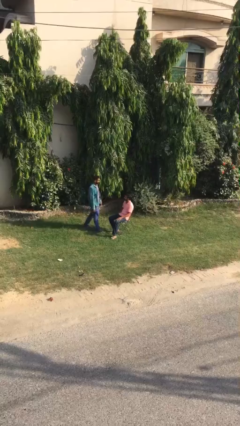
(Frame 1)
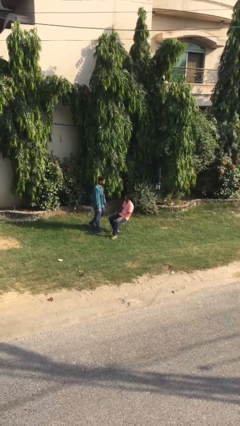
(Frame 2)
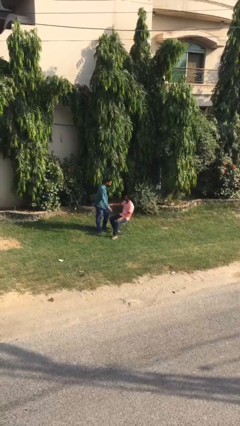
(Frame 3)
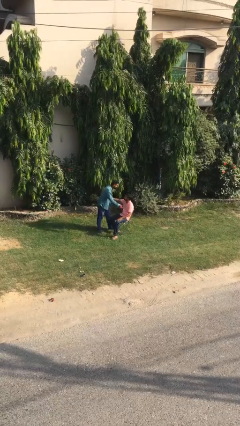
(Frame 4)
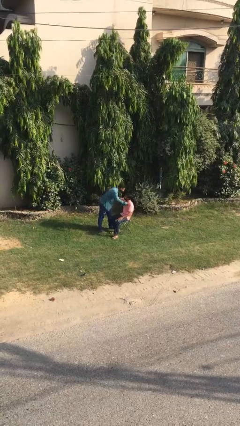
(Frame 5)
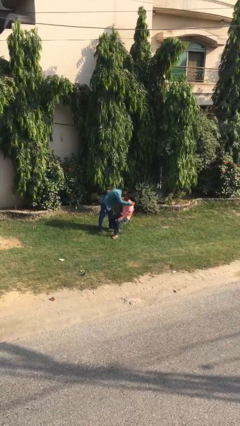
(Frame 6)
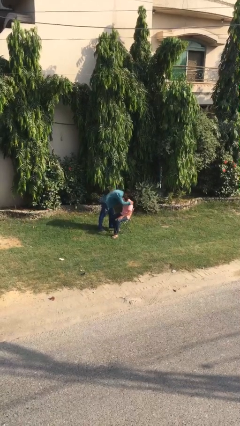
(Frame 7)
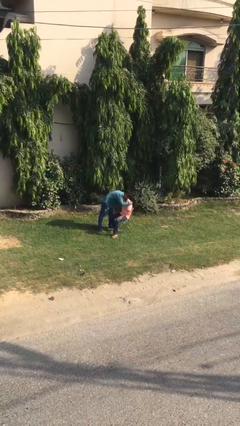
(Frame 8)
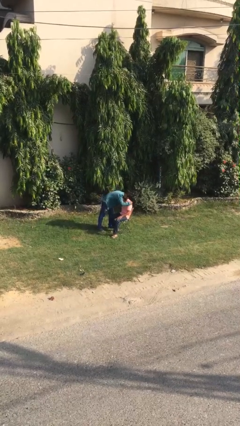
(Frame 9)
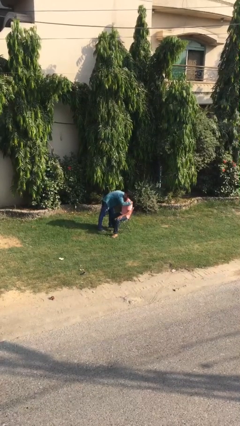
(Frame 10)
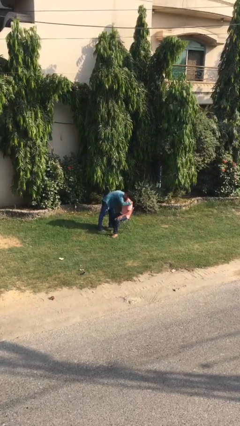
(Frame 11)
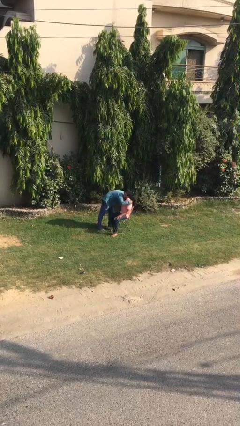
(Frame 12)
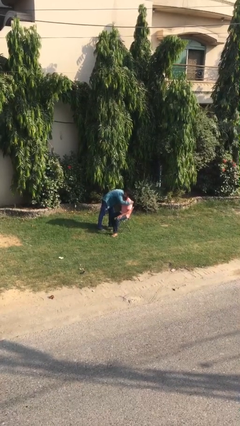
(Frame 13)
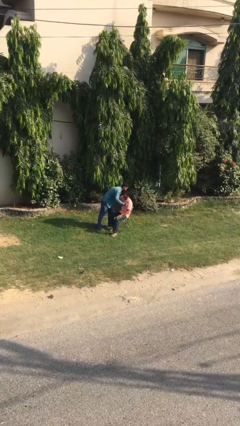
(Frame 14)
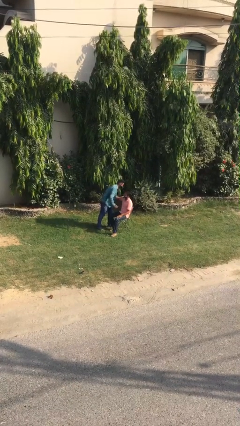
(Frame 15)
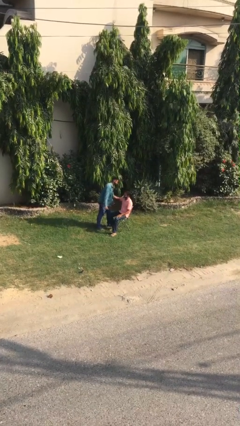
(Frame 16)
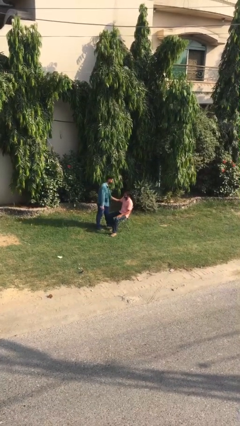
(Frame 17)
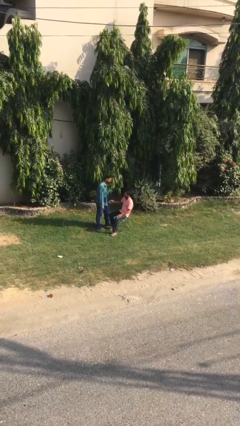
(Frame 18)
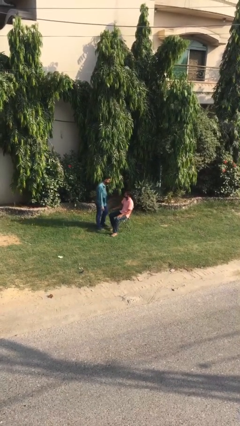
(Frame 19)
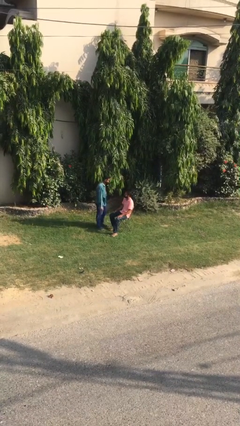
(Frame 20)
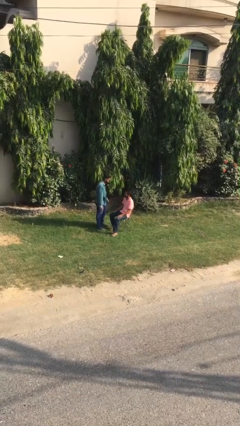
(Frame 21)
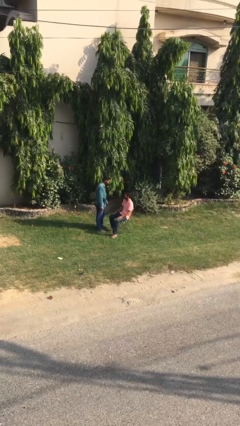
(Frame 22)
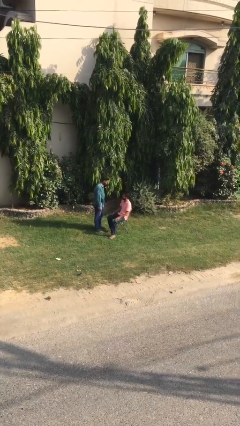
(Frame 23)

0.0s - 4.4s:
person embraces person

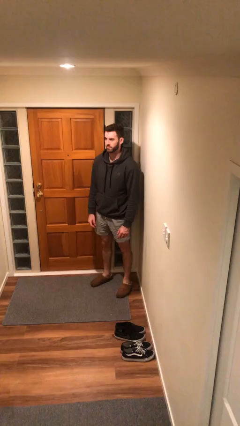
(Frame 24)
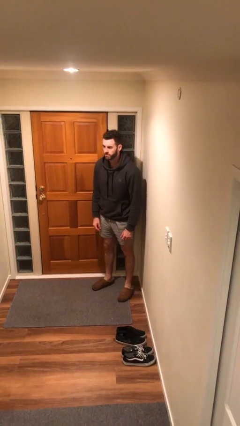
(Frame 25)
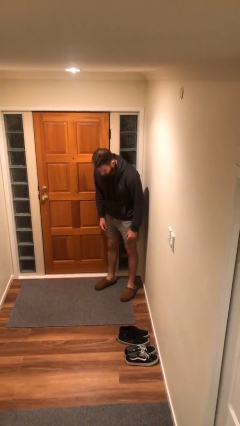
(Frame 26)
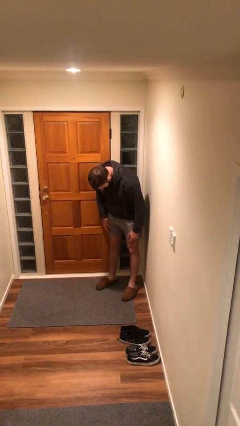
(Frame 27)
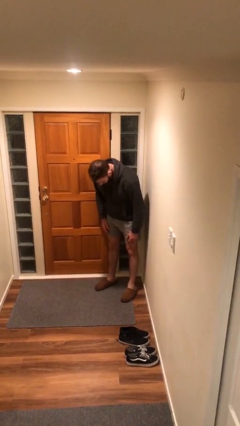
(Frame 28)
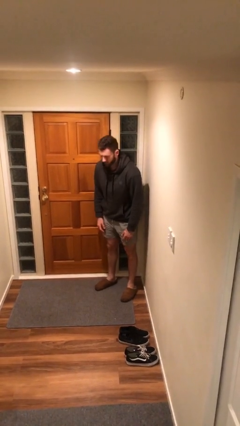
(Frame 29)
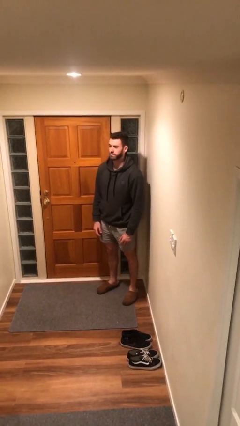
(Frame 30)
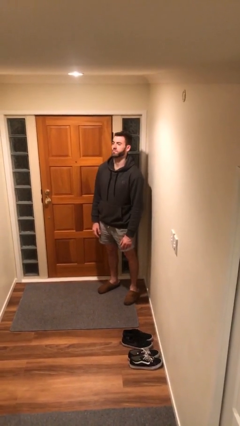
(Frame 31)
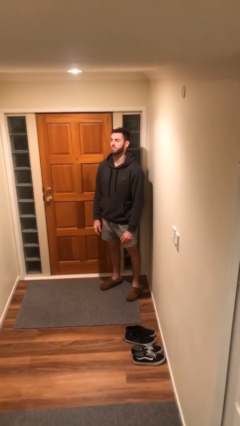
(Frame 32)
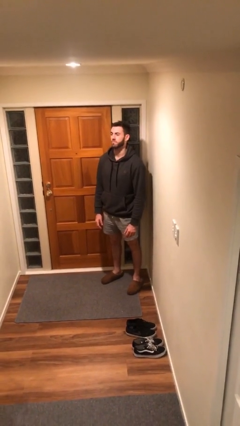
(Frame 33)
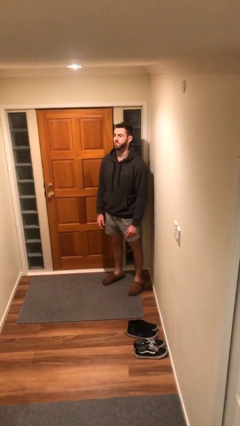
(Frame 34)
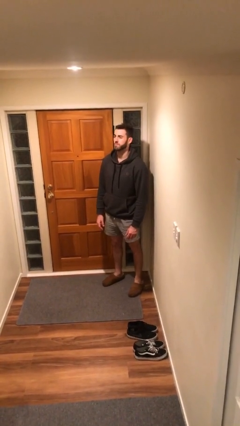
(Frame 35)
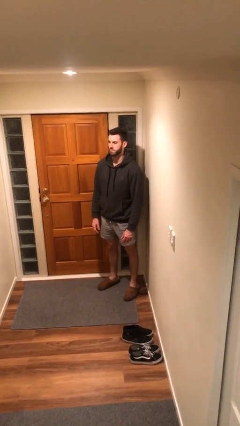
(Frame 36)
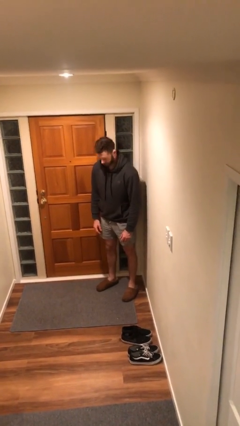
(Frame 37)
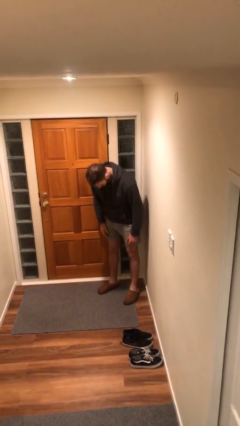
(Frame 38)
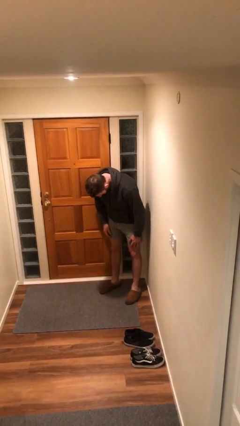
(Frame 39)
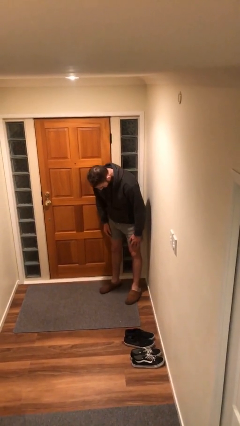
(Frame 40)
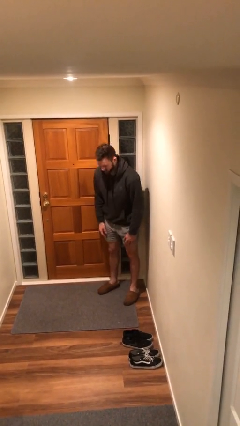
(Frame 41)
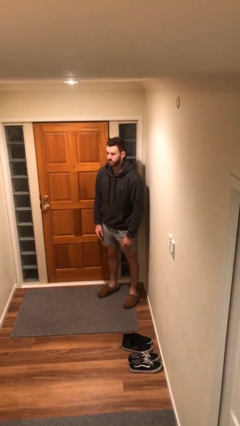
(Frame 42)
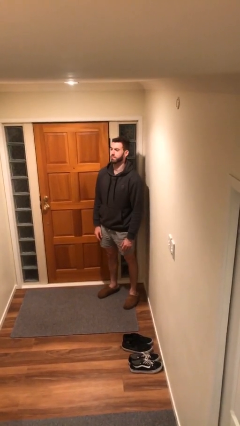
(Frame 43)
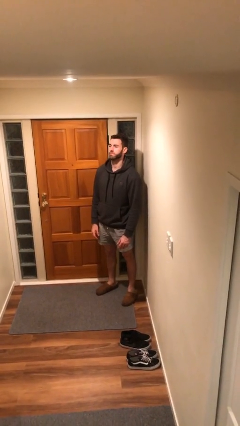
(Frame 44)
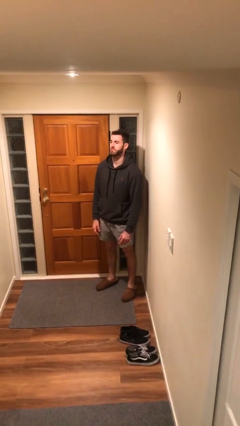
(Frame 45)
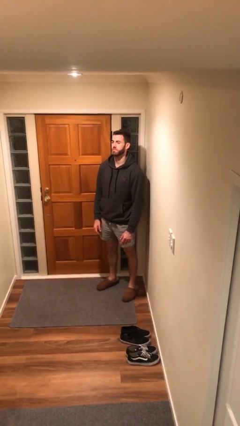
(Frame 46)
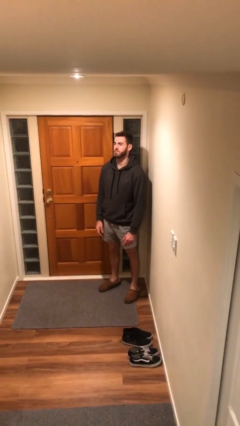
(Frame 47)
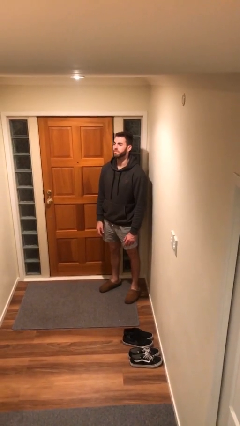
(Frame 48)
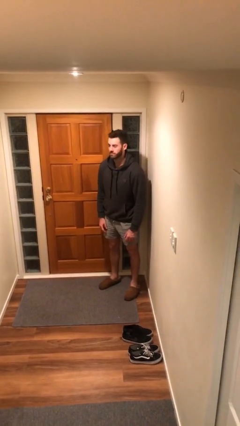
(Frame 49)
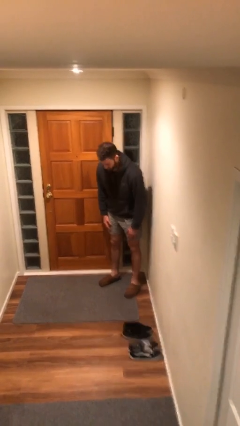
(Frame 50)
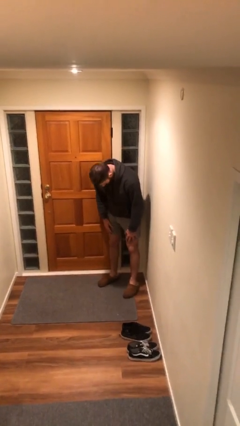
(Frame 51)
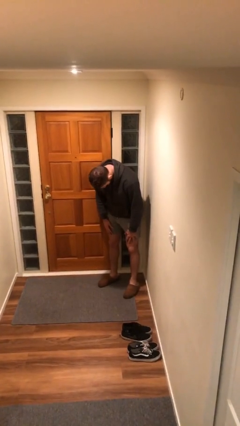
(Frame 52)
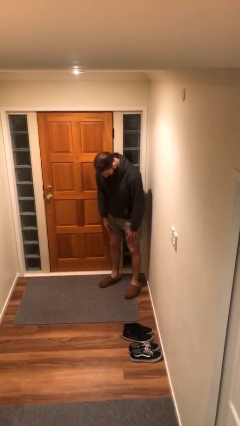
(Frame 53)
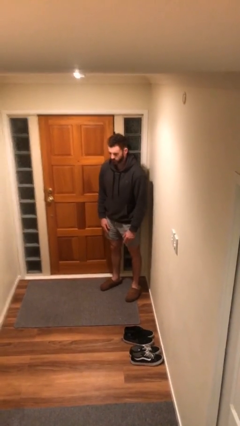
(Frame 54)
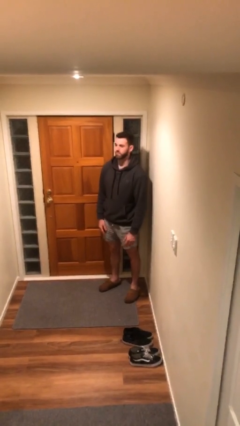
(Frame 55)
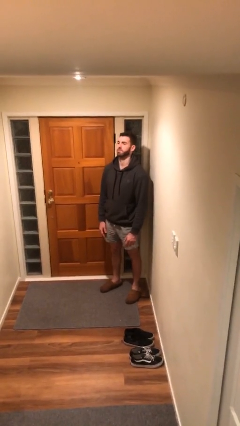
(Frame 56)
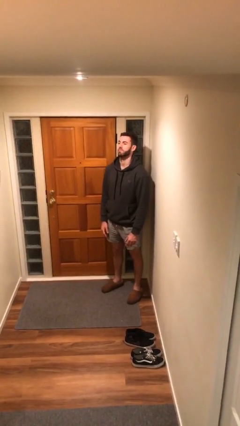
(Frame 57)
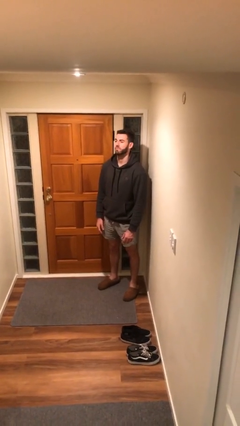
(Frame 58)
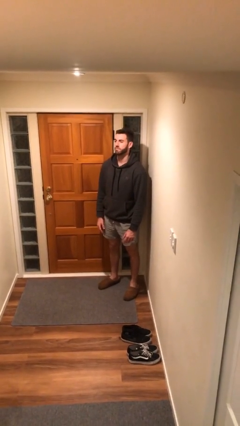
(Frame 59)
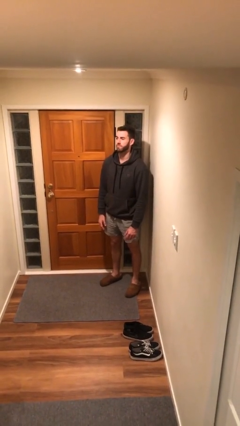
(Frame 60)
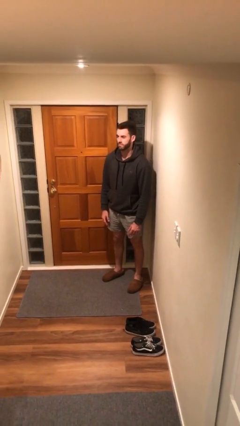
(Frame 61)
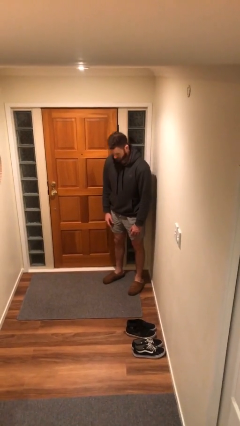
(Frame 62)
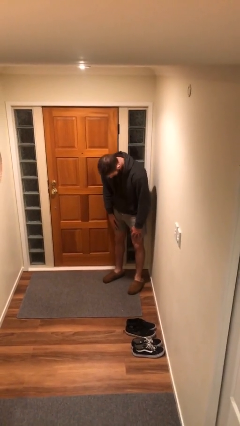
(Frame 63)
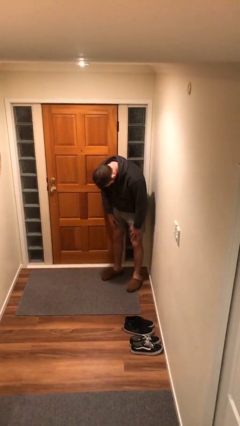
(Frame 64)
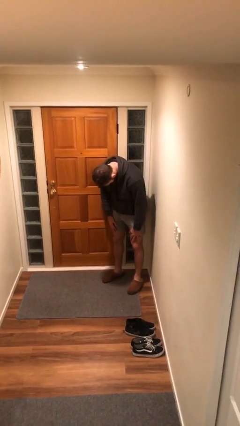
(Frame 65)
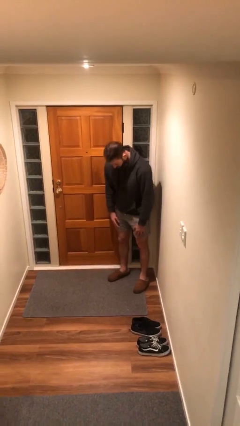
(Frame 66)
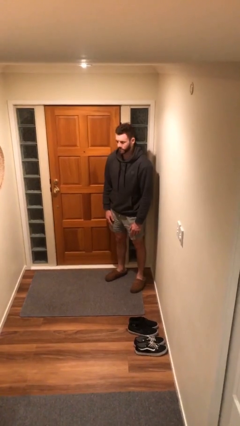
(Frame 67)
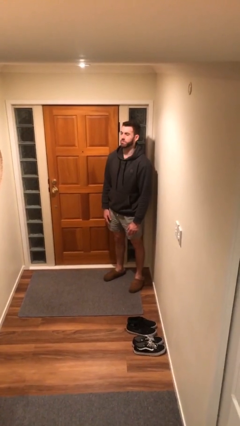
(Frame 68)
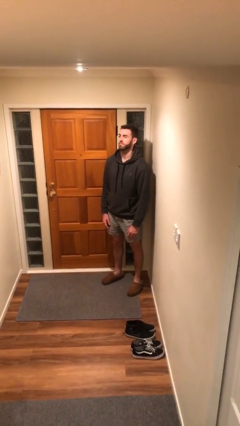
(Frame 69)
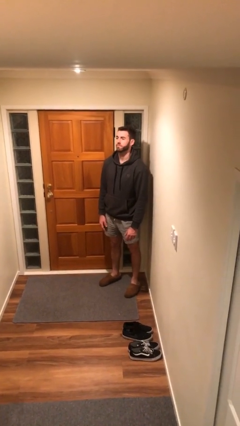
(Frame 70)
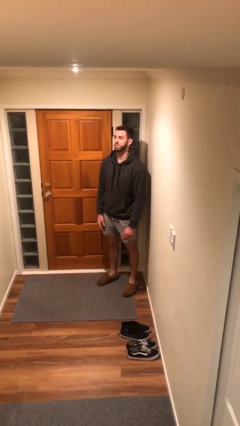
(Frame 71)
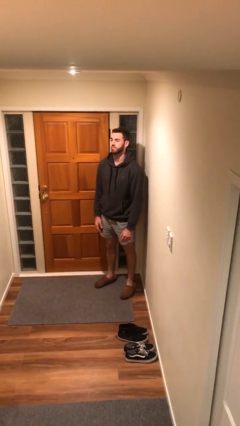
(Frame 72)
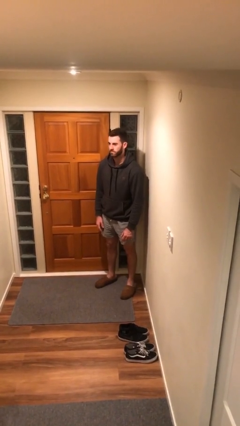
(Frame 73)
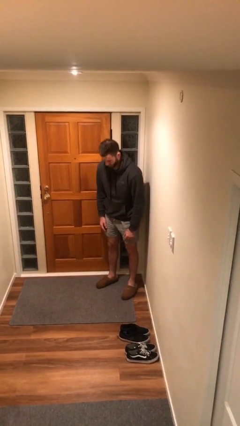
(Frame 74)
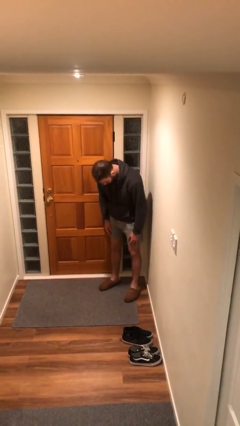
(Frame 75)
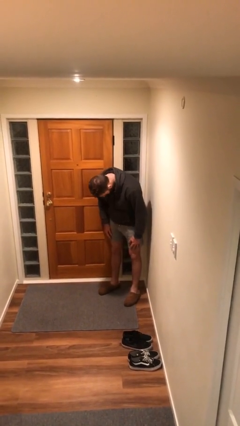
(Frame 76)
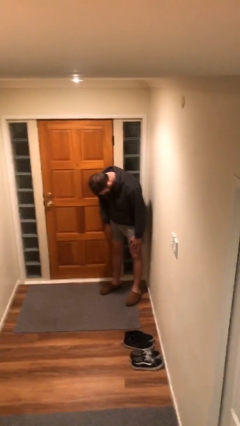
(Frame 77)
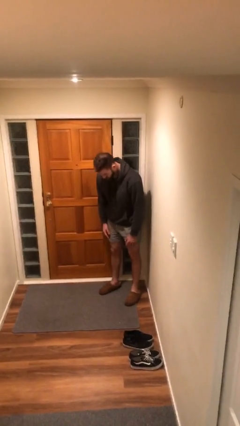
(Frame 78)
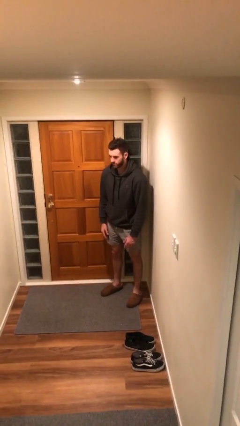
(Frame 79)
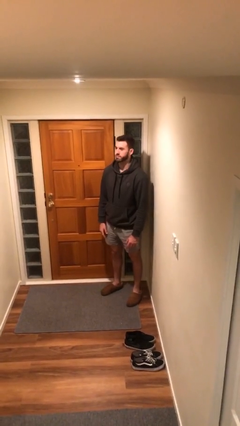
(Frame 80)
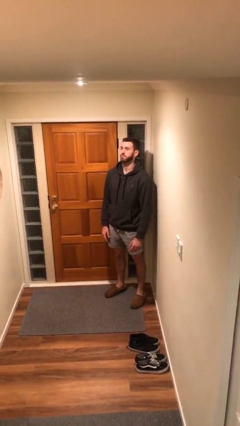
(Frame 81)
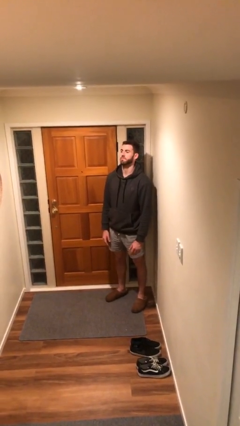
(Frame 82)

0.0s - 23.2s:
person bows

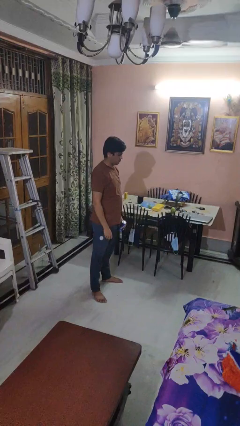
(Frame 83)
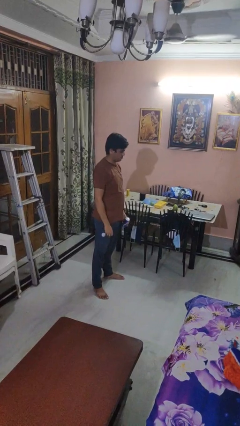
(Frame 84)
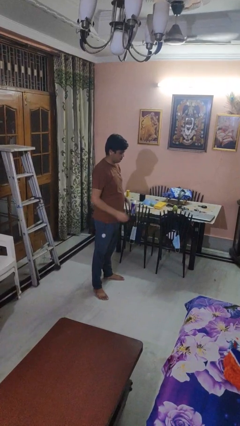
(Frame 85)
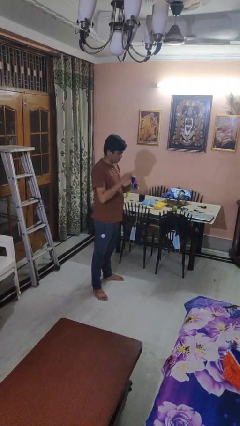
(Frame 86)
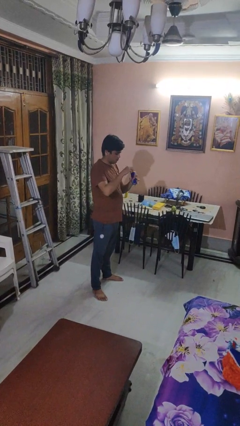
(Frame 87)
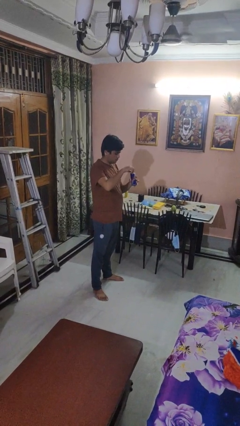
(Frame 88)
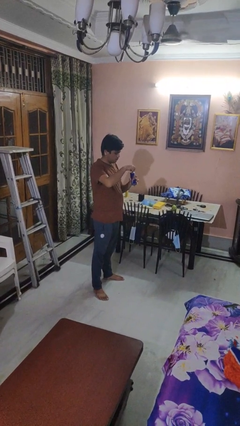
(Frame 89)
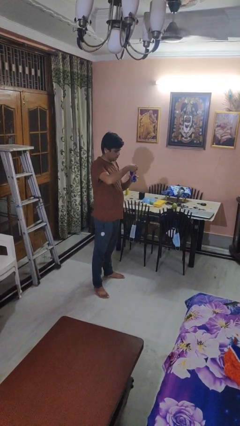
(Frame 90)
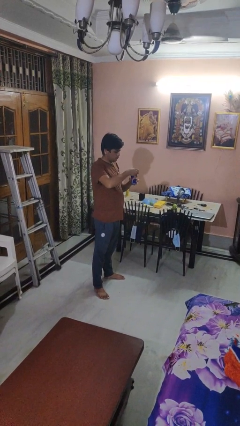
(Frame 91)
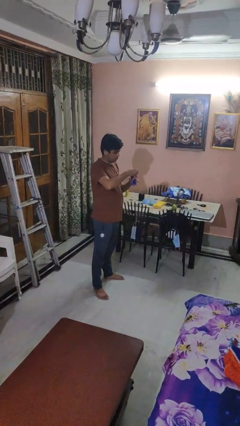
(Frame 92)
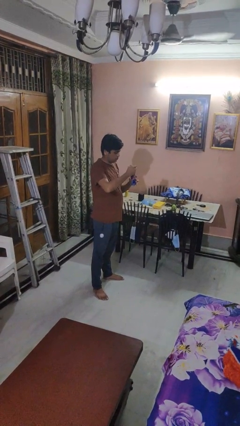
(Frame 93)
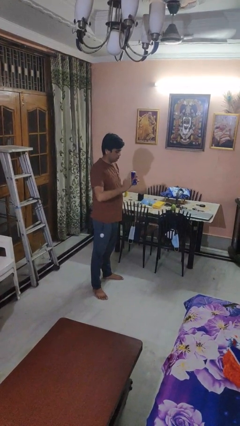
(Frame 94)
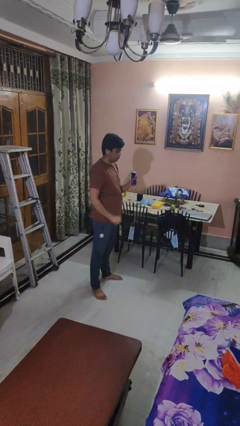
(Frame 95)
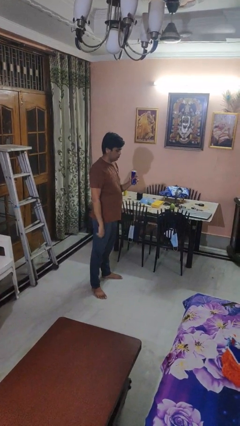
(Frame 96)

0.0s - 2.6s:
person opens beverage can
